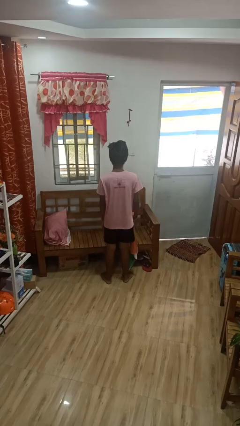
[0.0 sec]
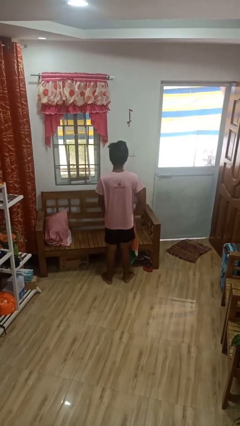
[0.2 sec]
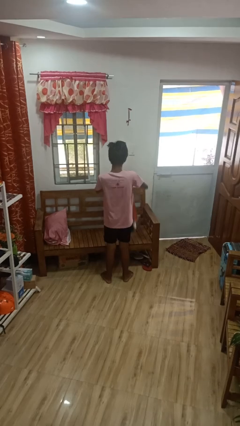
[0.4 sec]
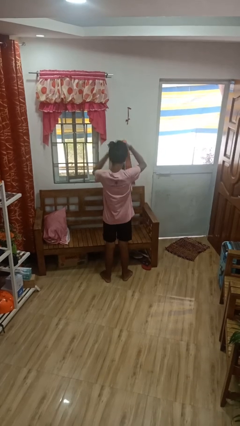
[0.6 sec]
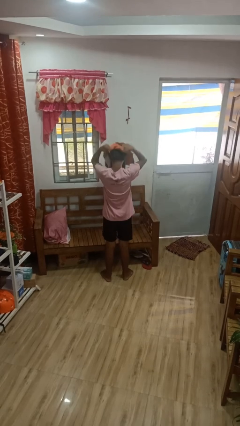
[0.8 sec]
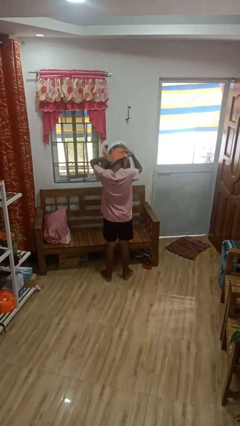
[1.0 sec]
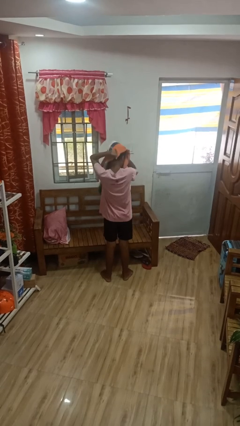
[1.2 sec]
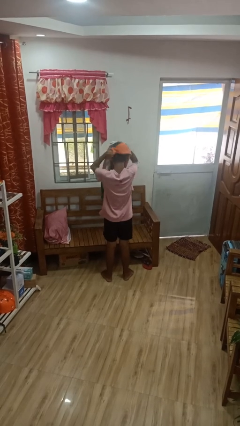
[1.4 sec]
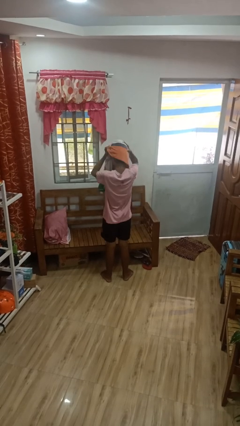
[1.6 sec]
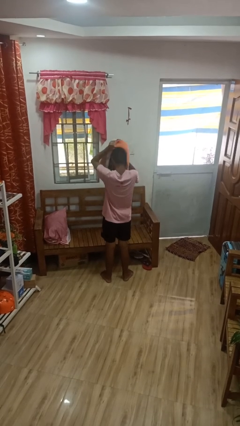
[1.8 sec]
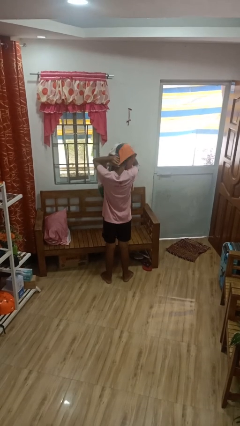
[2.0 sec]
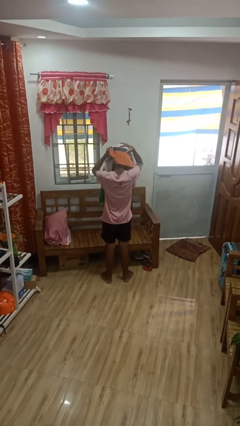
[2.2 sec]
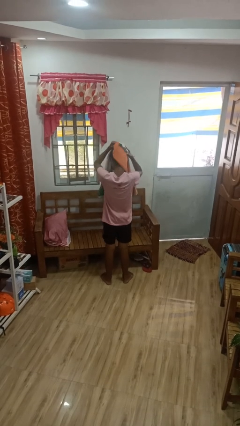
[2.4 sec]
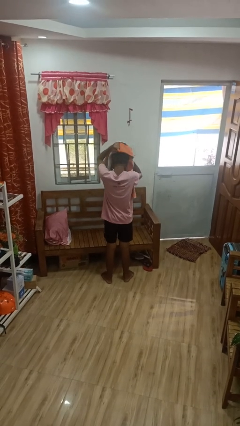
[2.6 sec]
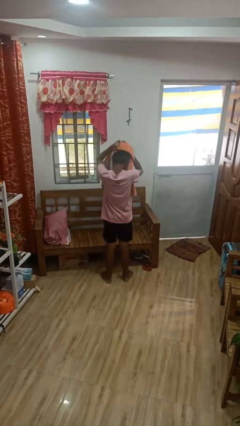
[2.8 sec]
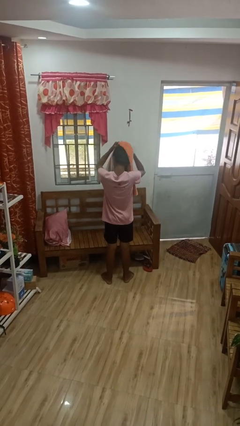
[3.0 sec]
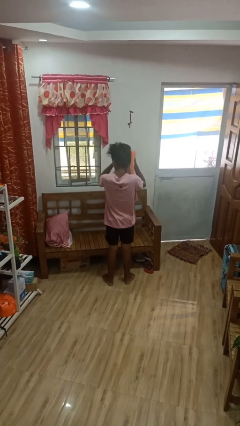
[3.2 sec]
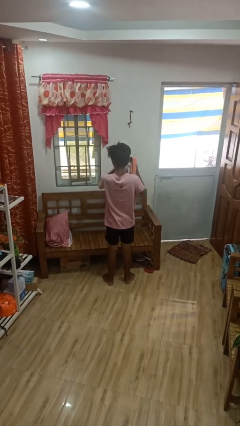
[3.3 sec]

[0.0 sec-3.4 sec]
person dries hair with towel

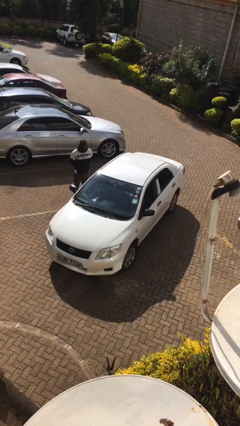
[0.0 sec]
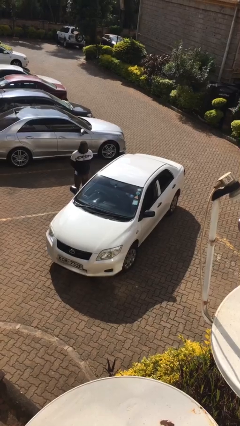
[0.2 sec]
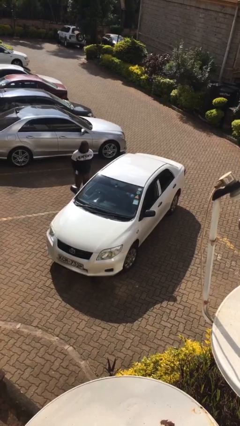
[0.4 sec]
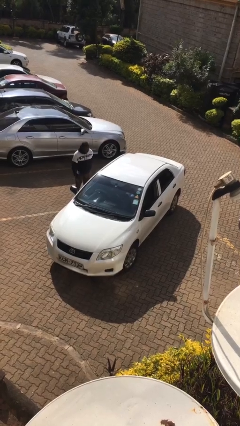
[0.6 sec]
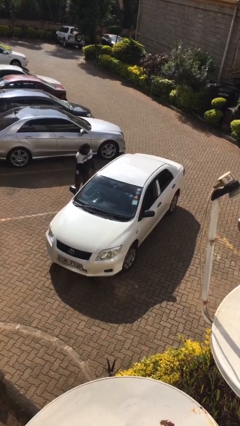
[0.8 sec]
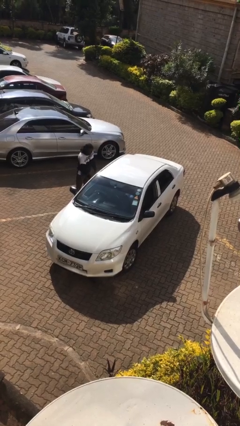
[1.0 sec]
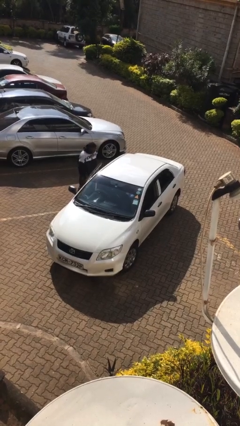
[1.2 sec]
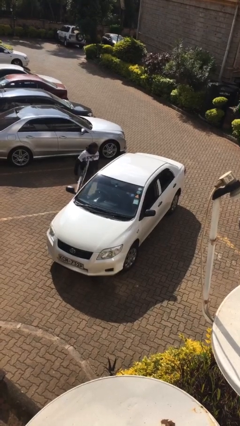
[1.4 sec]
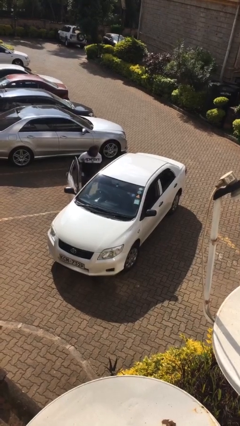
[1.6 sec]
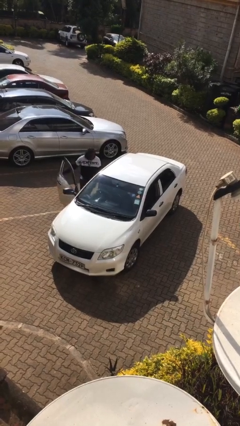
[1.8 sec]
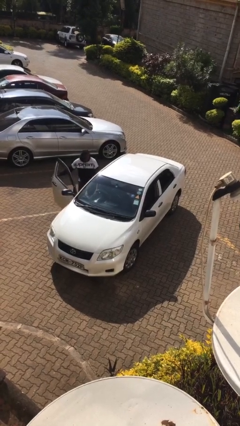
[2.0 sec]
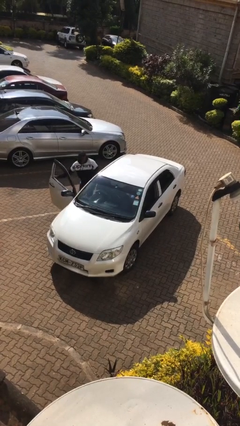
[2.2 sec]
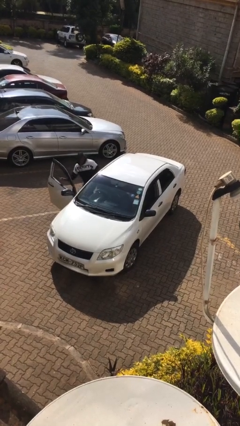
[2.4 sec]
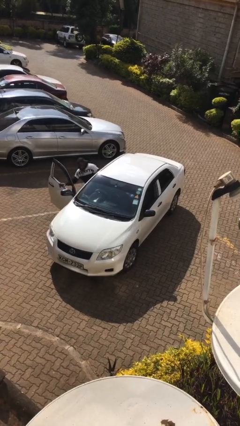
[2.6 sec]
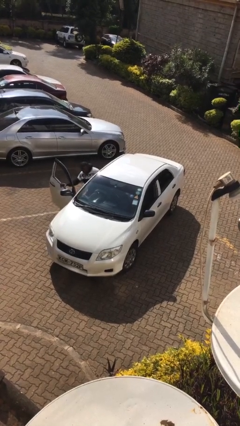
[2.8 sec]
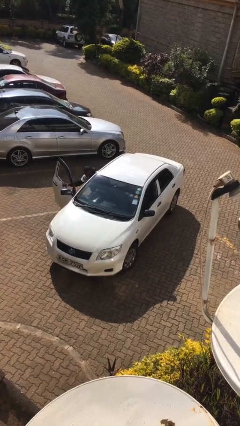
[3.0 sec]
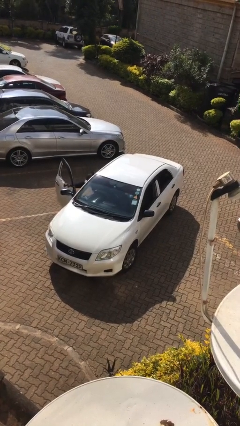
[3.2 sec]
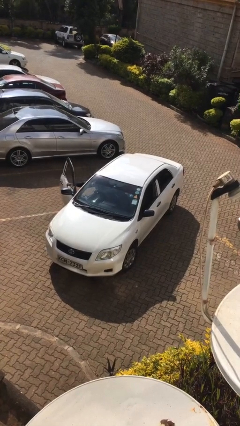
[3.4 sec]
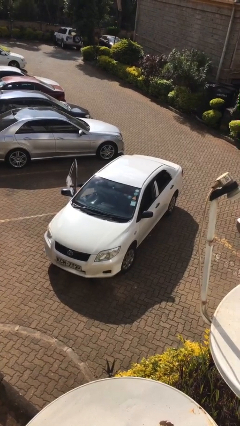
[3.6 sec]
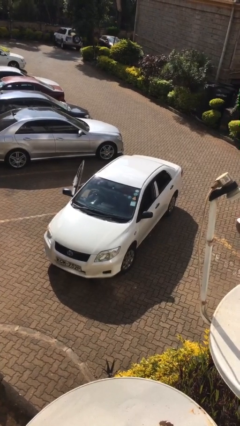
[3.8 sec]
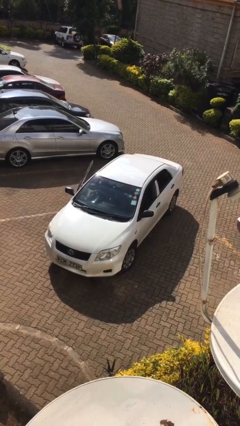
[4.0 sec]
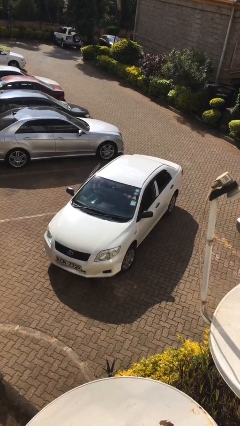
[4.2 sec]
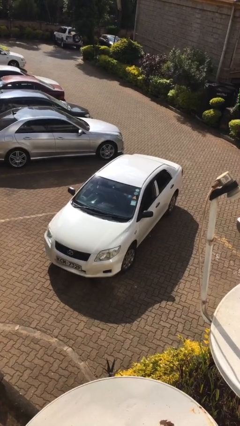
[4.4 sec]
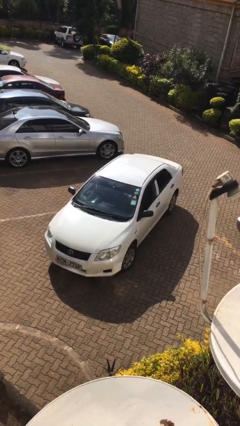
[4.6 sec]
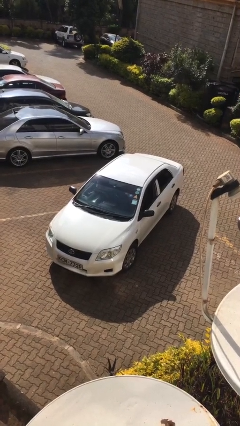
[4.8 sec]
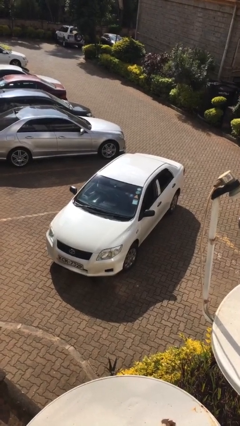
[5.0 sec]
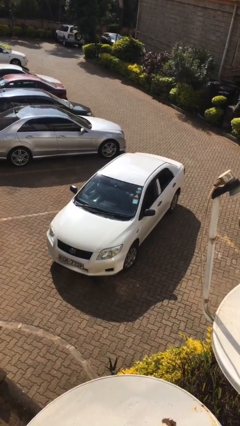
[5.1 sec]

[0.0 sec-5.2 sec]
car picks up person

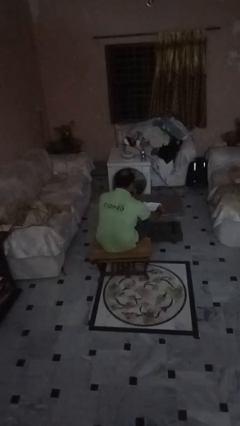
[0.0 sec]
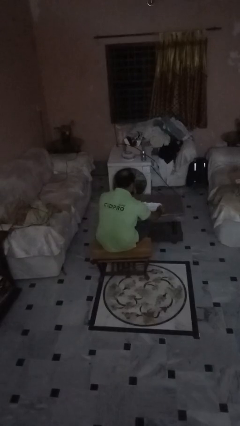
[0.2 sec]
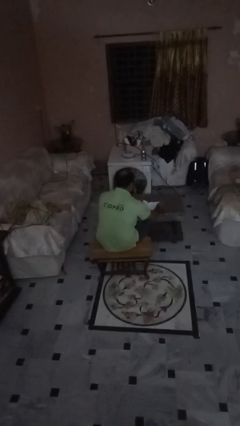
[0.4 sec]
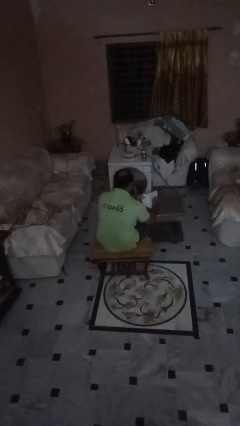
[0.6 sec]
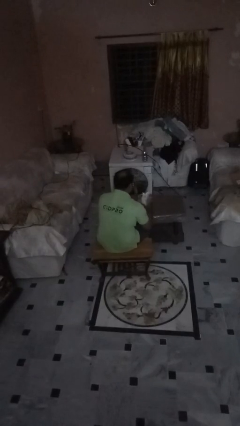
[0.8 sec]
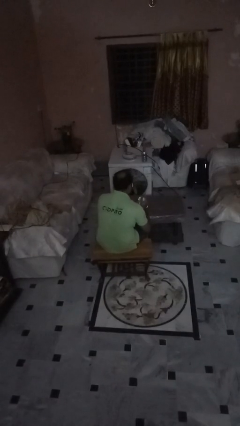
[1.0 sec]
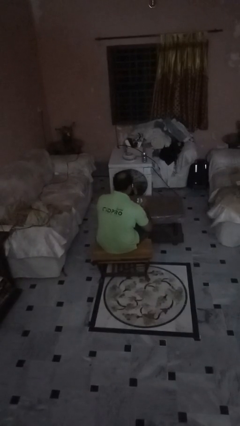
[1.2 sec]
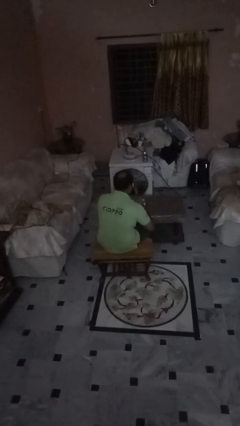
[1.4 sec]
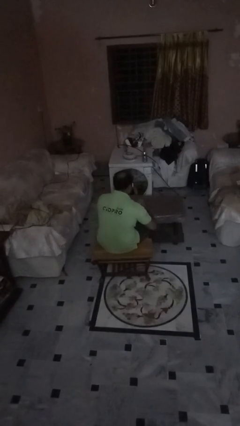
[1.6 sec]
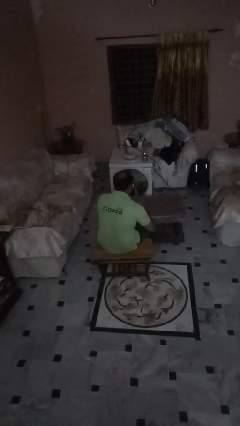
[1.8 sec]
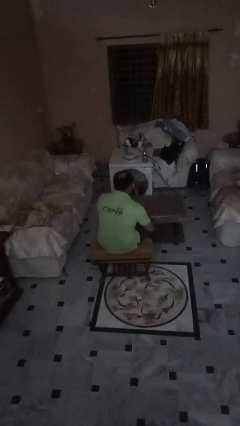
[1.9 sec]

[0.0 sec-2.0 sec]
person crumples paper

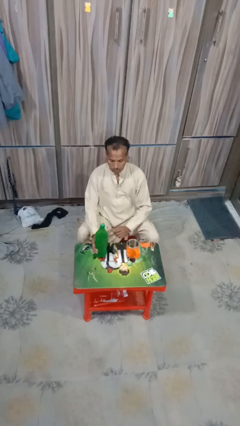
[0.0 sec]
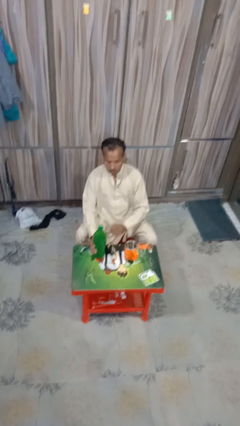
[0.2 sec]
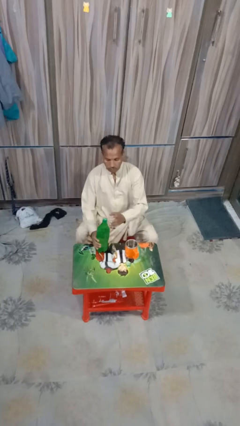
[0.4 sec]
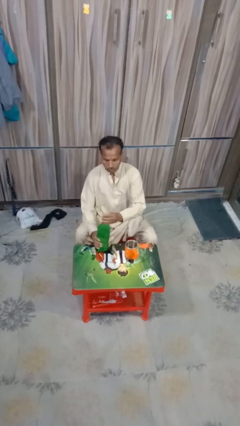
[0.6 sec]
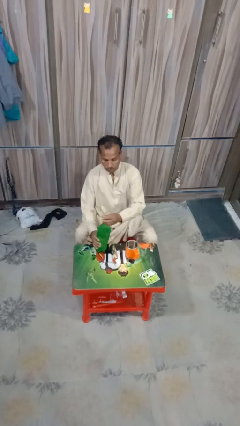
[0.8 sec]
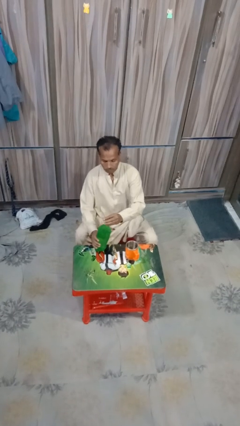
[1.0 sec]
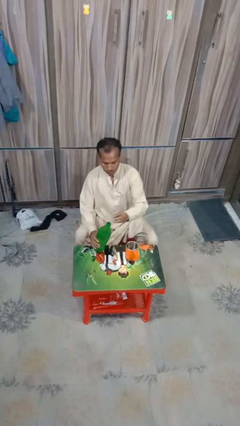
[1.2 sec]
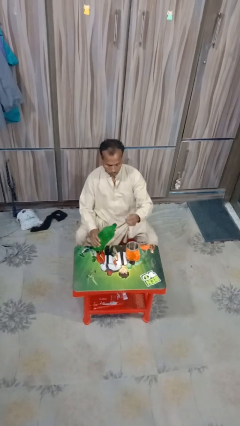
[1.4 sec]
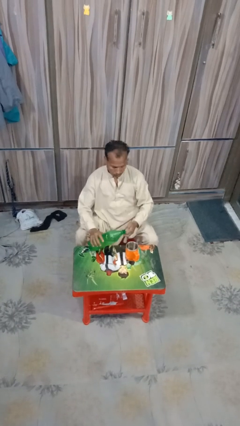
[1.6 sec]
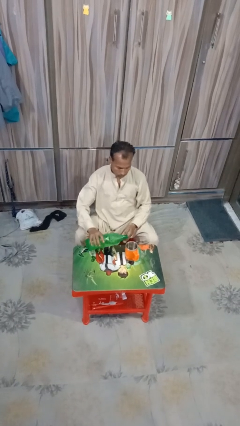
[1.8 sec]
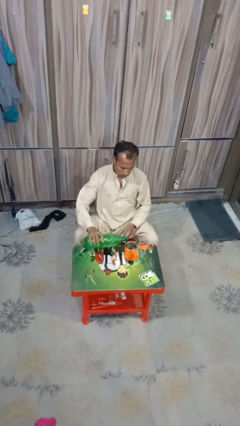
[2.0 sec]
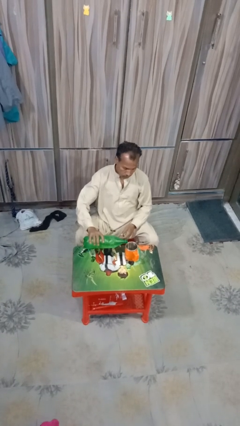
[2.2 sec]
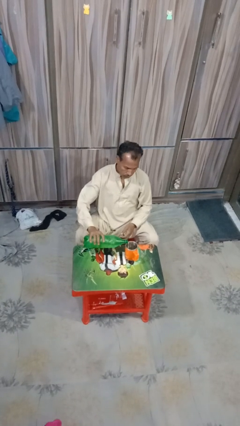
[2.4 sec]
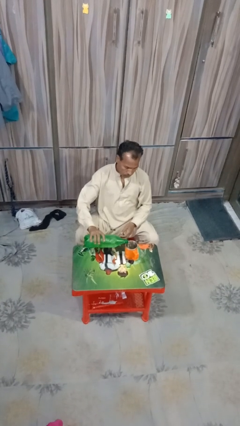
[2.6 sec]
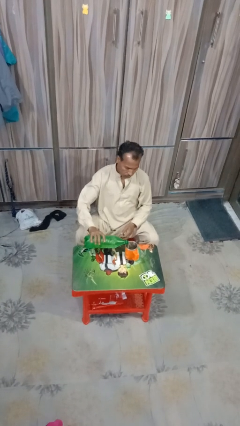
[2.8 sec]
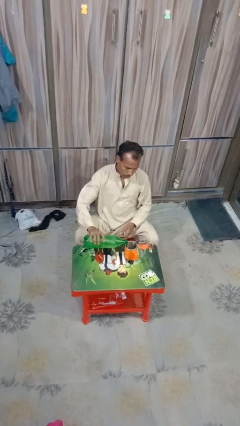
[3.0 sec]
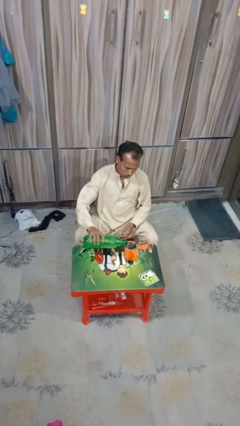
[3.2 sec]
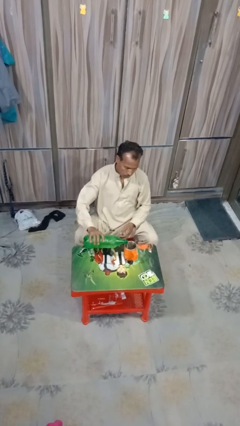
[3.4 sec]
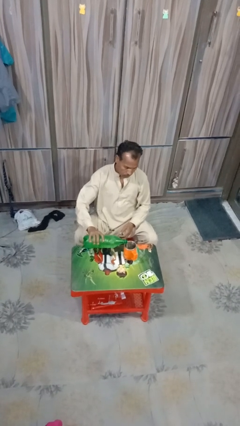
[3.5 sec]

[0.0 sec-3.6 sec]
person pours liquid into cup

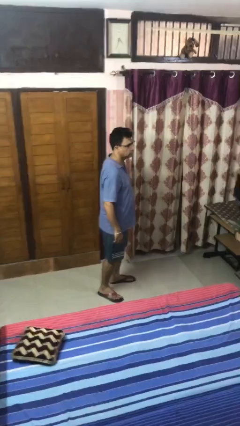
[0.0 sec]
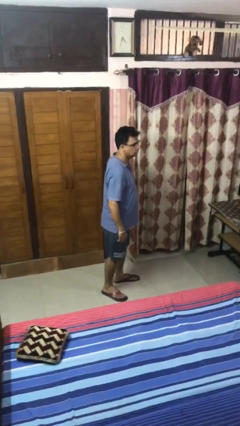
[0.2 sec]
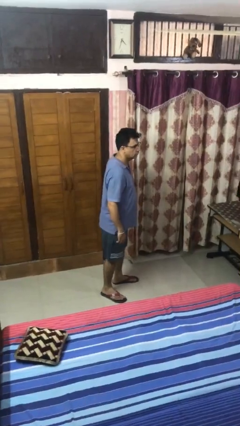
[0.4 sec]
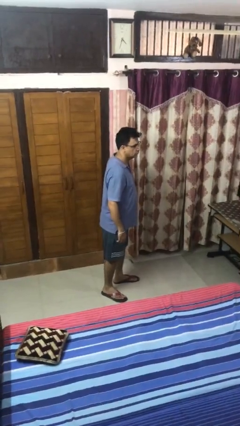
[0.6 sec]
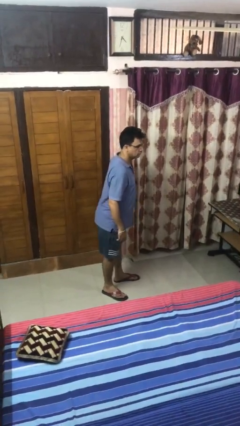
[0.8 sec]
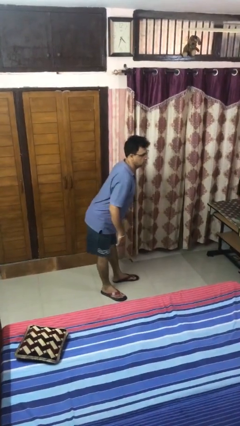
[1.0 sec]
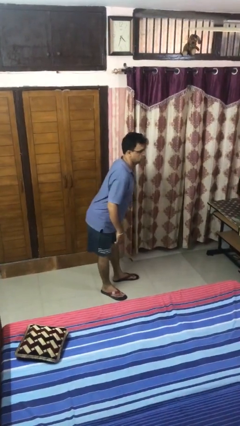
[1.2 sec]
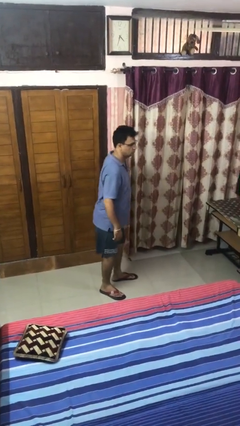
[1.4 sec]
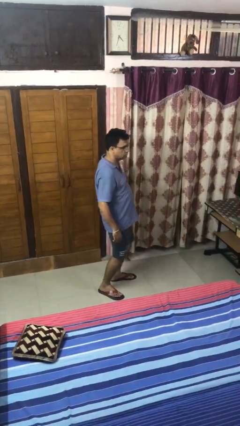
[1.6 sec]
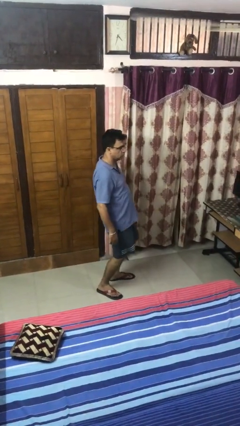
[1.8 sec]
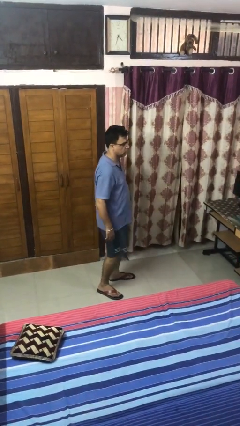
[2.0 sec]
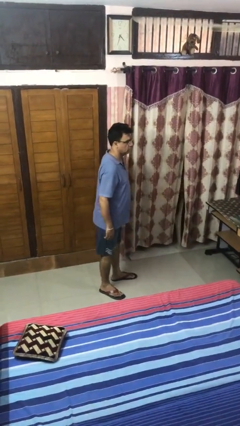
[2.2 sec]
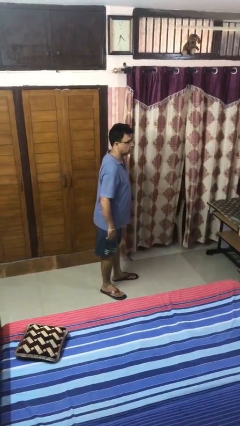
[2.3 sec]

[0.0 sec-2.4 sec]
person wiggles hips

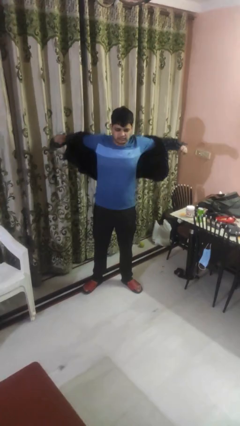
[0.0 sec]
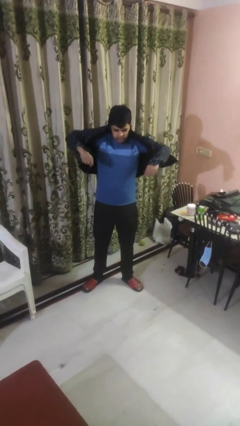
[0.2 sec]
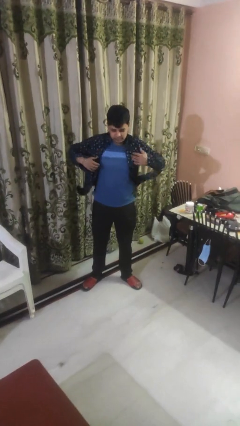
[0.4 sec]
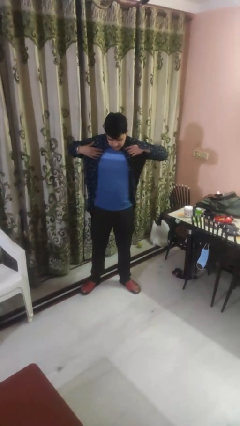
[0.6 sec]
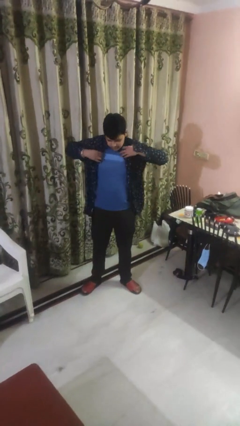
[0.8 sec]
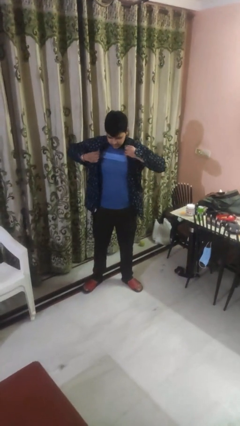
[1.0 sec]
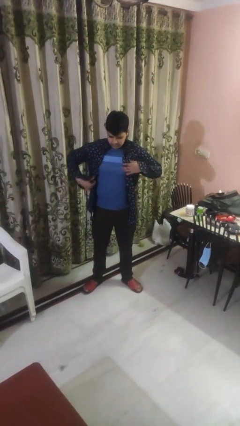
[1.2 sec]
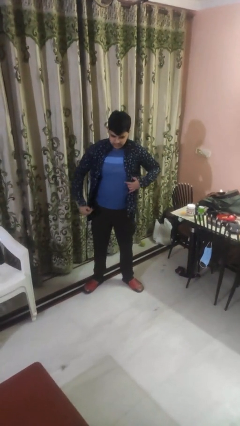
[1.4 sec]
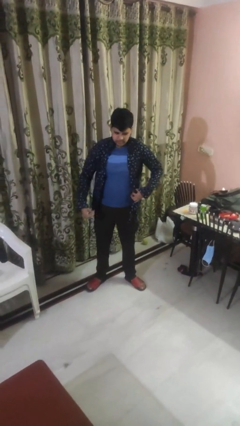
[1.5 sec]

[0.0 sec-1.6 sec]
person puts on shirt
